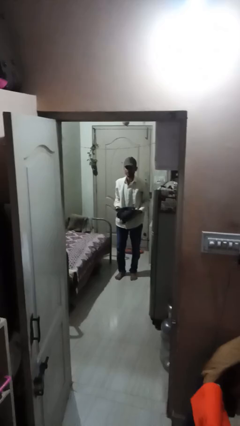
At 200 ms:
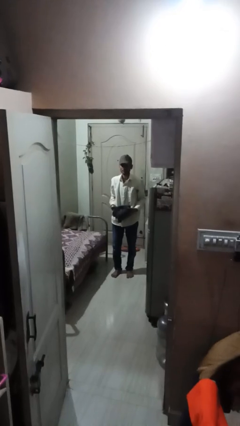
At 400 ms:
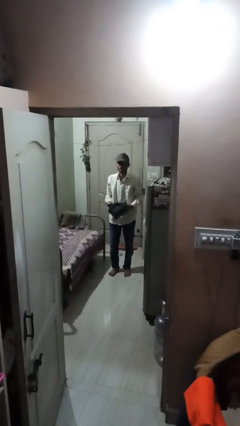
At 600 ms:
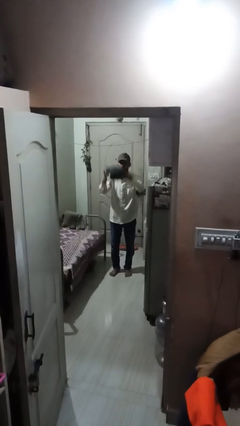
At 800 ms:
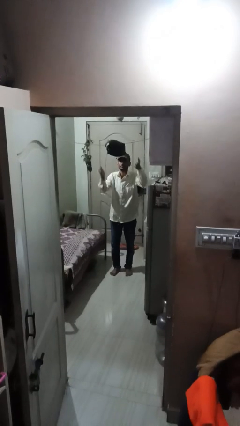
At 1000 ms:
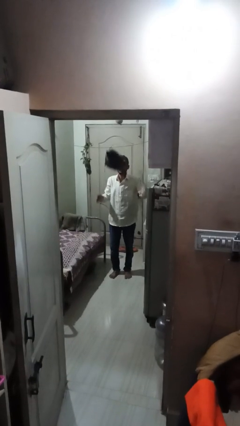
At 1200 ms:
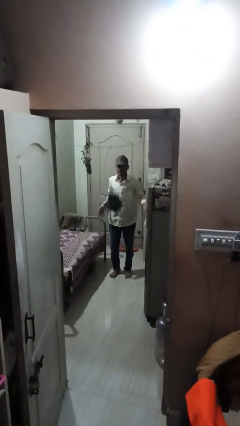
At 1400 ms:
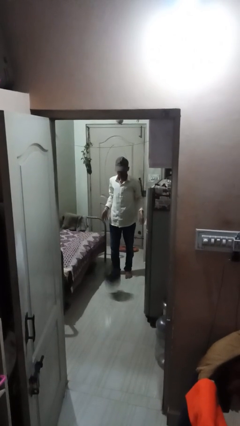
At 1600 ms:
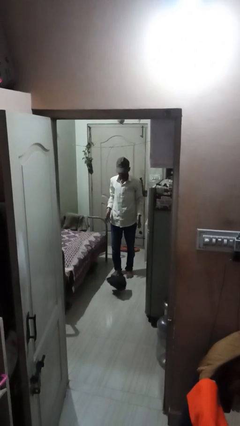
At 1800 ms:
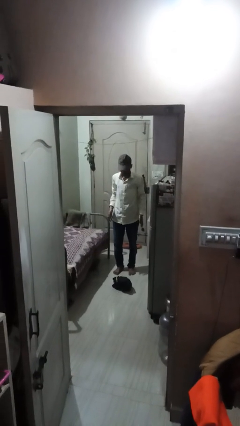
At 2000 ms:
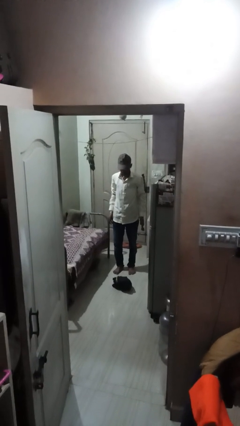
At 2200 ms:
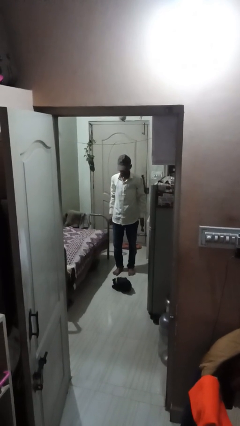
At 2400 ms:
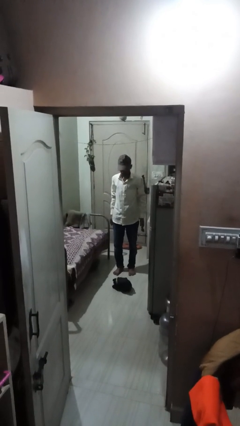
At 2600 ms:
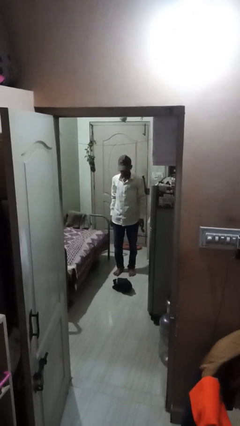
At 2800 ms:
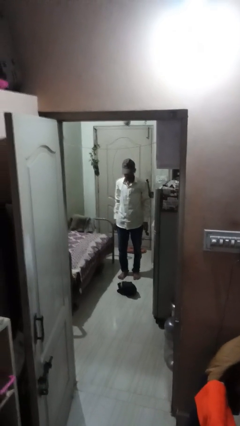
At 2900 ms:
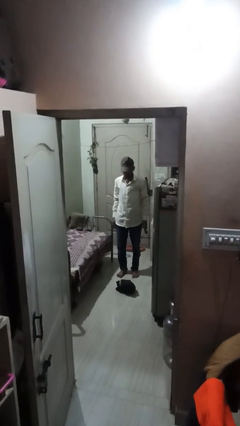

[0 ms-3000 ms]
person throws object into air

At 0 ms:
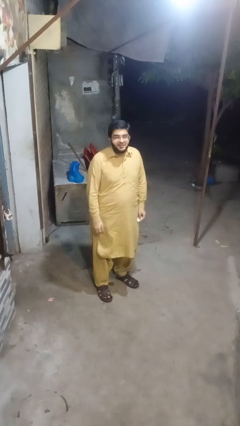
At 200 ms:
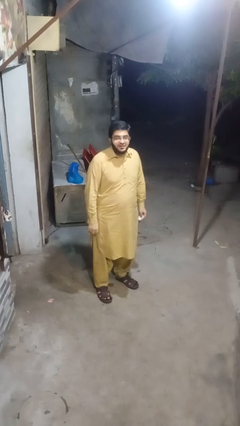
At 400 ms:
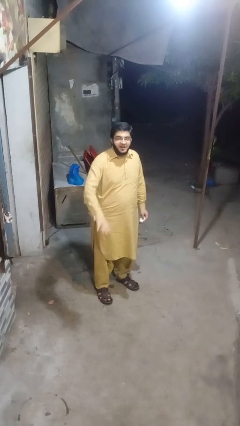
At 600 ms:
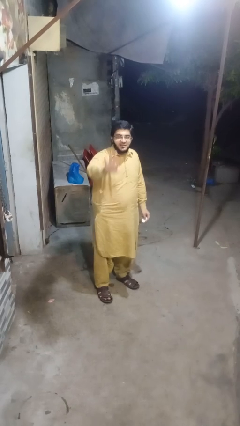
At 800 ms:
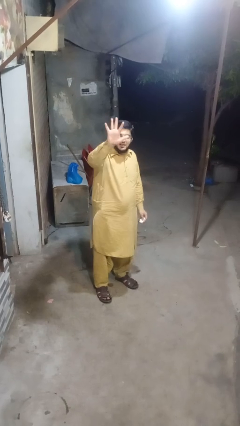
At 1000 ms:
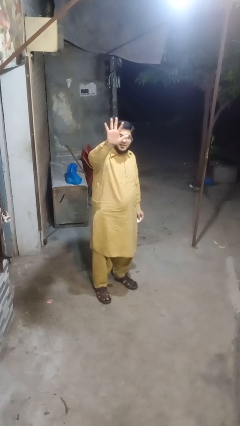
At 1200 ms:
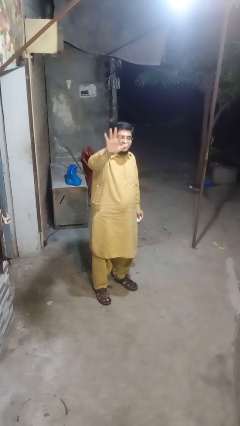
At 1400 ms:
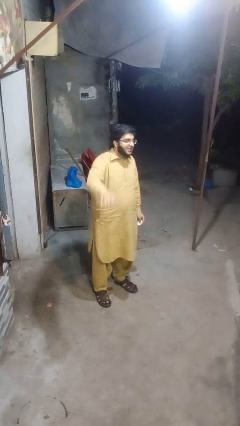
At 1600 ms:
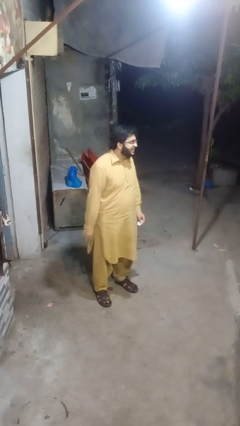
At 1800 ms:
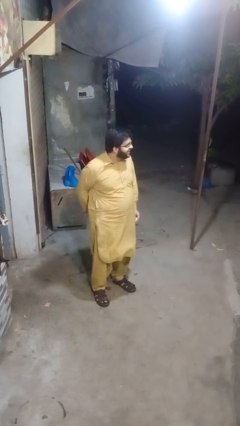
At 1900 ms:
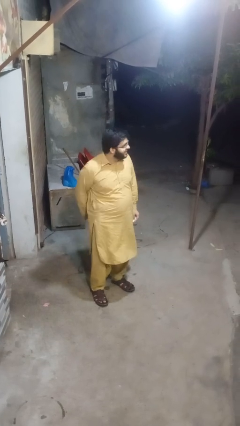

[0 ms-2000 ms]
person gestures number five

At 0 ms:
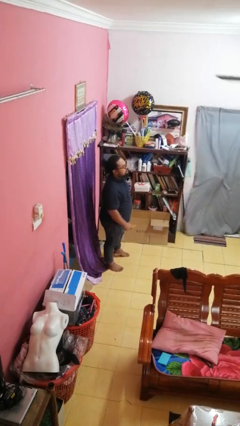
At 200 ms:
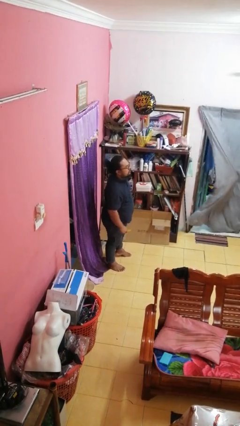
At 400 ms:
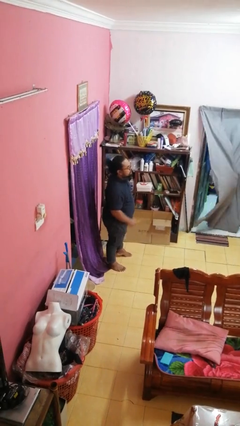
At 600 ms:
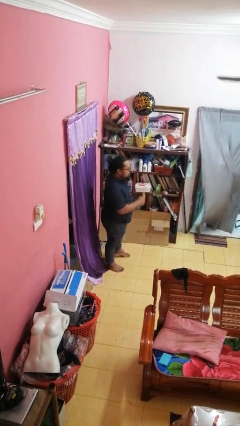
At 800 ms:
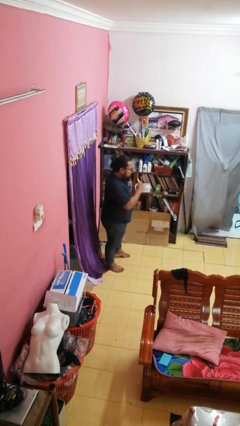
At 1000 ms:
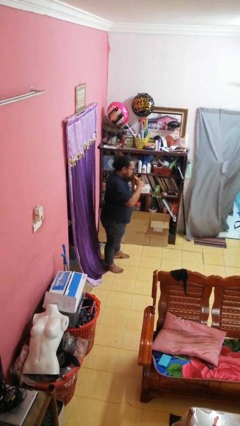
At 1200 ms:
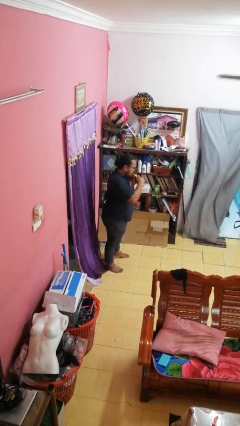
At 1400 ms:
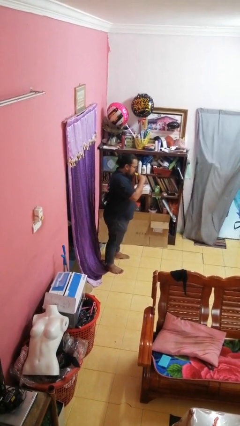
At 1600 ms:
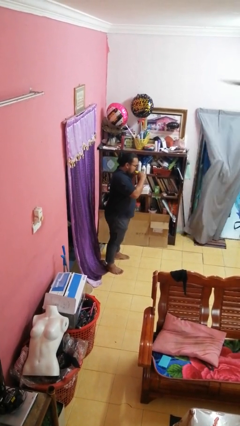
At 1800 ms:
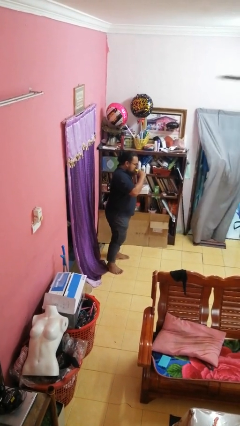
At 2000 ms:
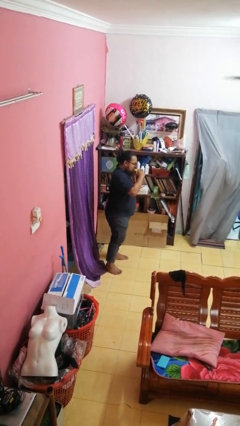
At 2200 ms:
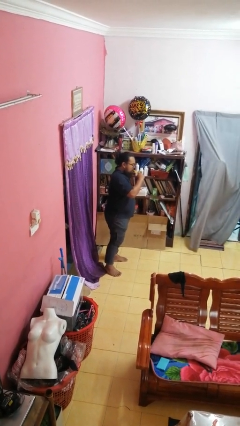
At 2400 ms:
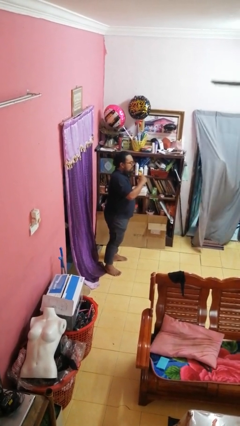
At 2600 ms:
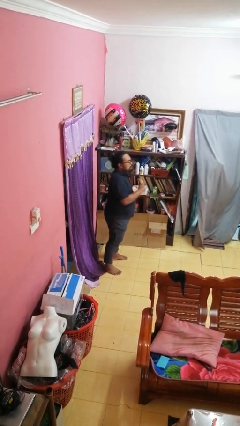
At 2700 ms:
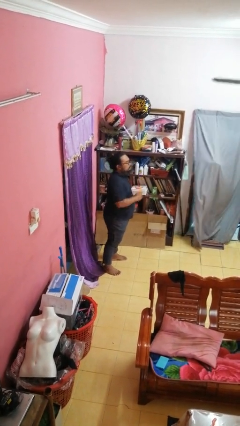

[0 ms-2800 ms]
person eats banana

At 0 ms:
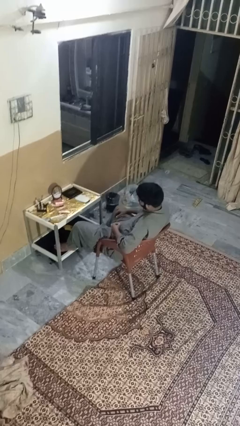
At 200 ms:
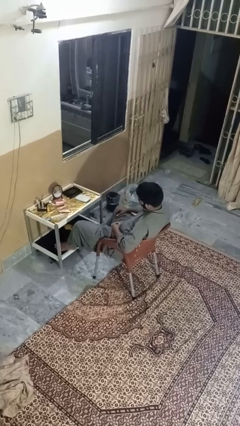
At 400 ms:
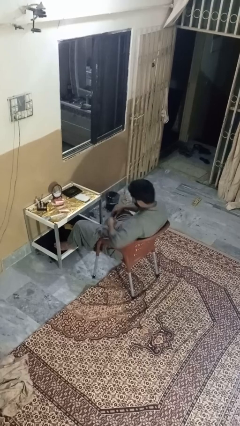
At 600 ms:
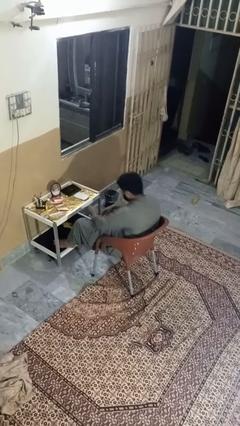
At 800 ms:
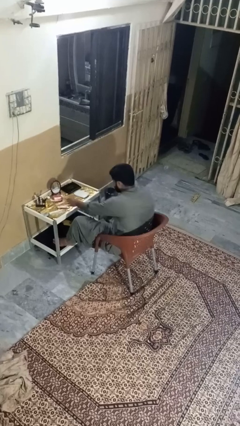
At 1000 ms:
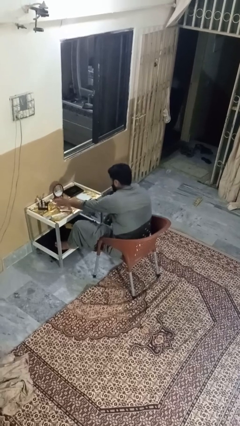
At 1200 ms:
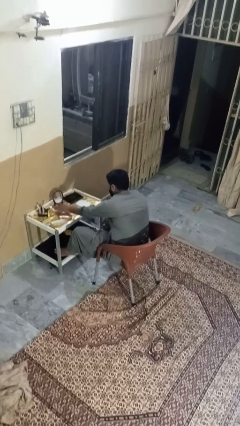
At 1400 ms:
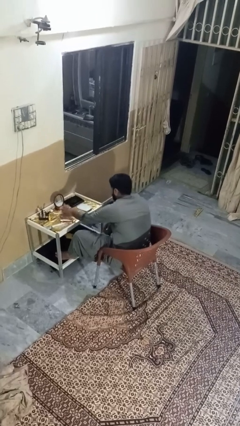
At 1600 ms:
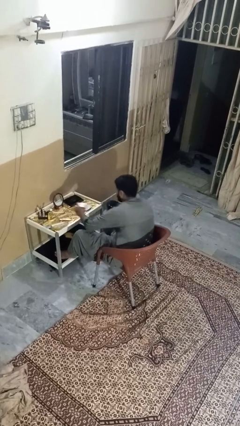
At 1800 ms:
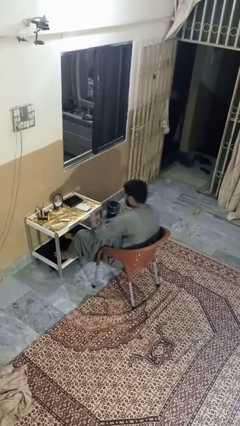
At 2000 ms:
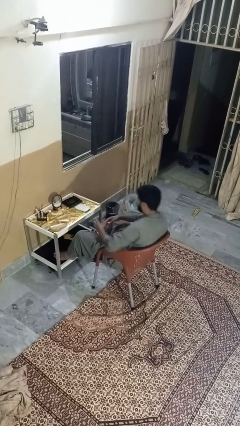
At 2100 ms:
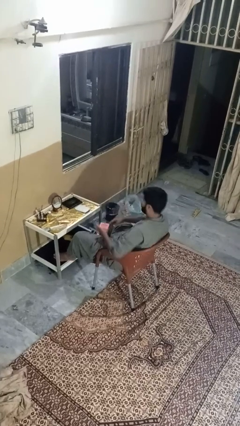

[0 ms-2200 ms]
person picks up object from table

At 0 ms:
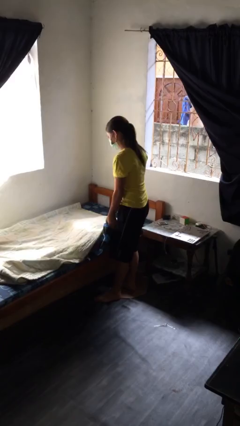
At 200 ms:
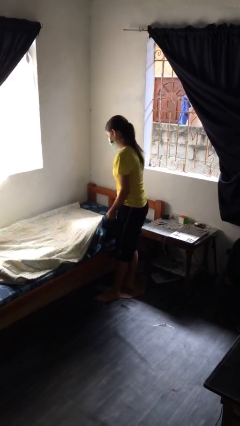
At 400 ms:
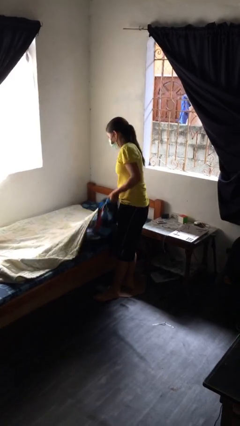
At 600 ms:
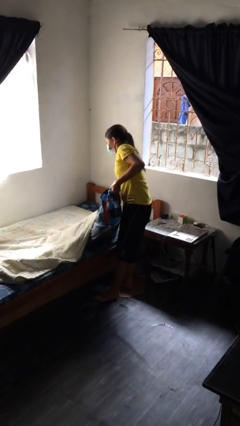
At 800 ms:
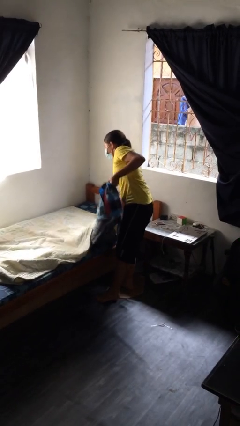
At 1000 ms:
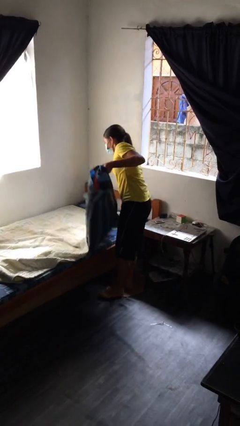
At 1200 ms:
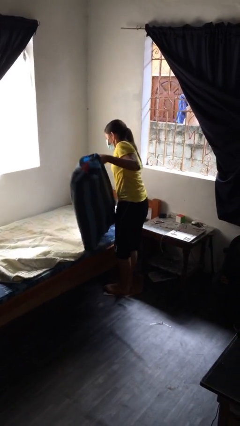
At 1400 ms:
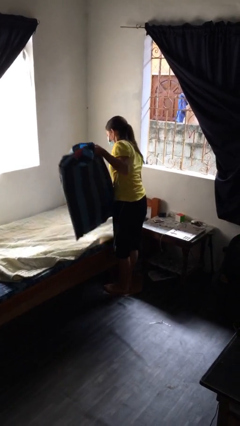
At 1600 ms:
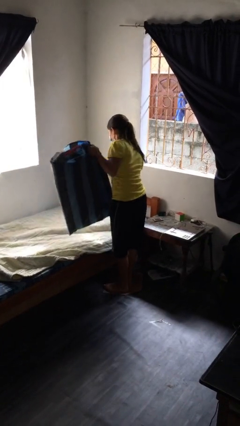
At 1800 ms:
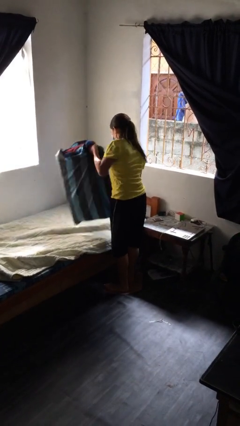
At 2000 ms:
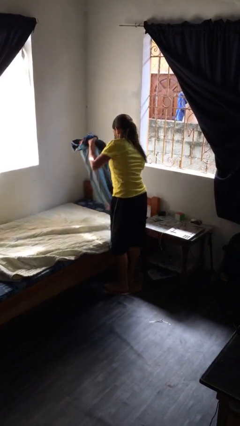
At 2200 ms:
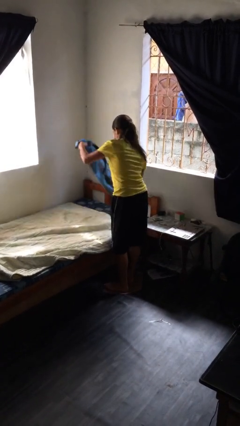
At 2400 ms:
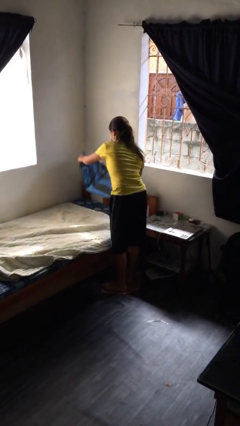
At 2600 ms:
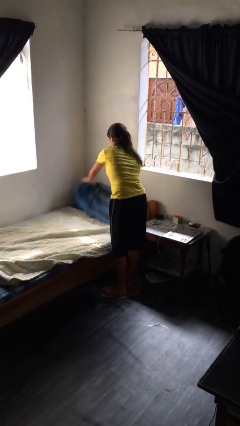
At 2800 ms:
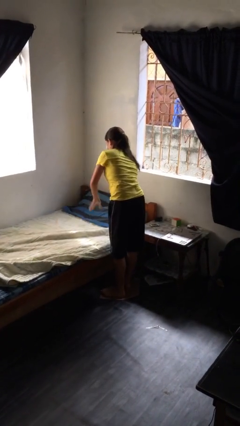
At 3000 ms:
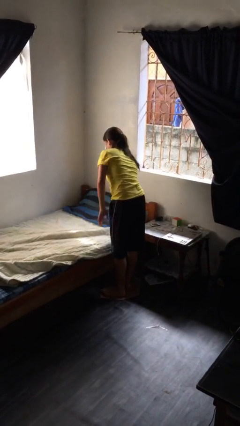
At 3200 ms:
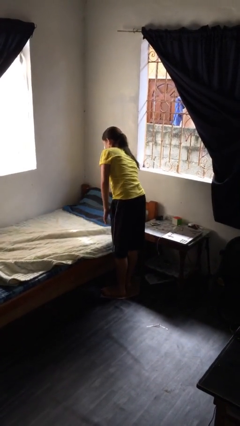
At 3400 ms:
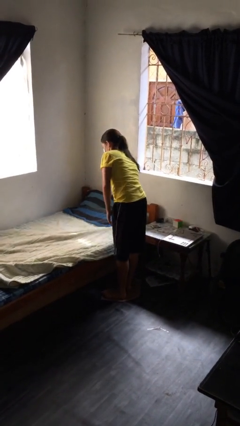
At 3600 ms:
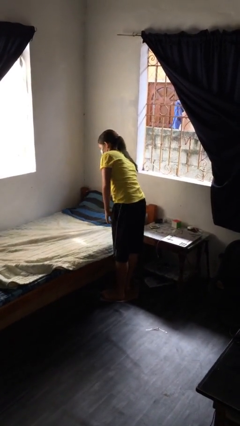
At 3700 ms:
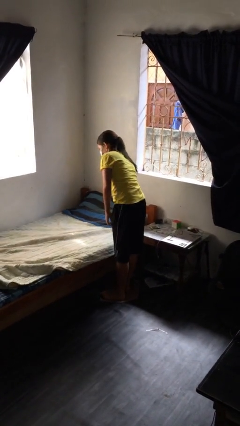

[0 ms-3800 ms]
person makes bed

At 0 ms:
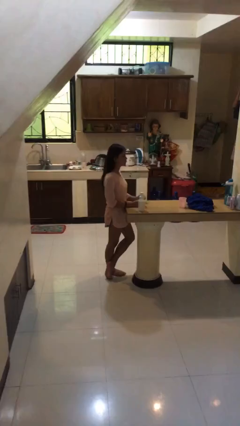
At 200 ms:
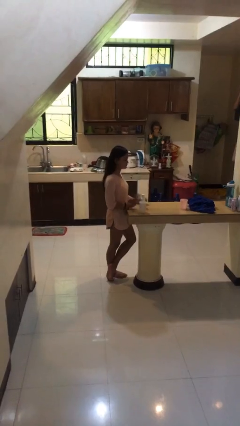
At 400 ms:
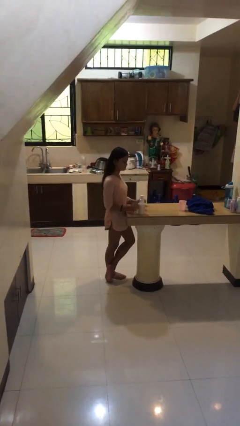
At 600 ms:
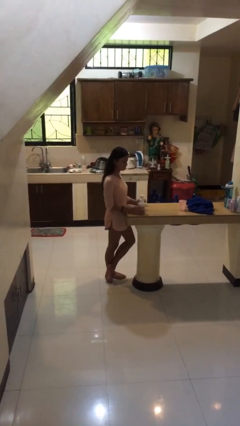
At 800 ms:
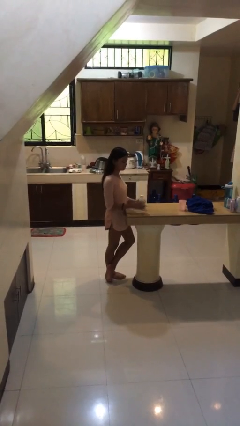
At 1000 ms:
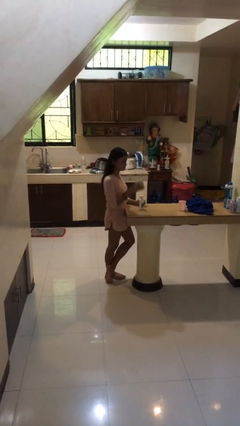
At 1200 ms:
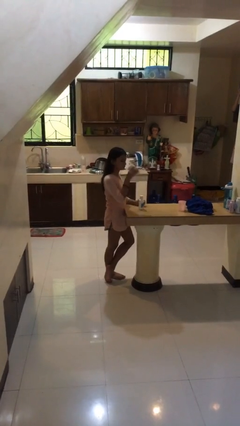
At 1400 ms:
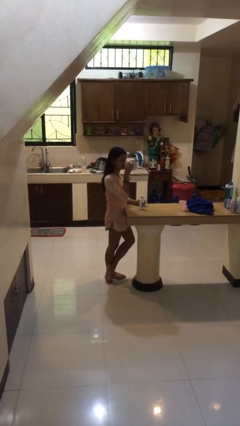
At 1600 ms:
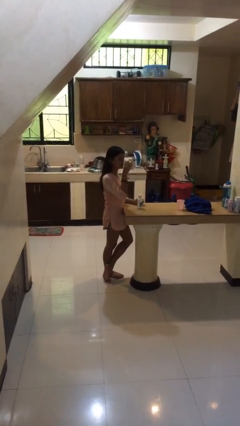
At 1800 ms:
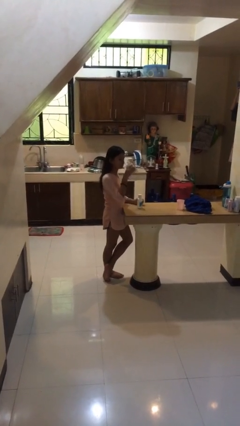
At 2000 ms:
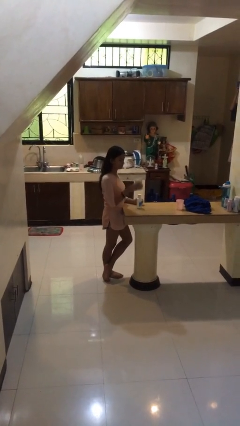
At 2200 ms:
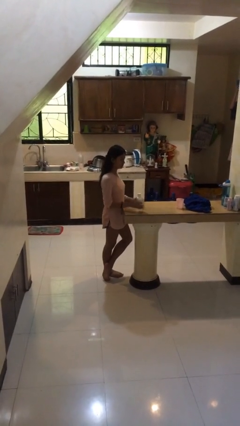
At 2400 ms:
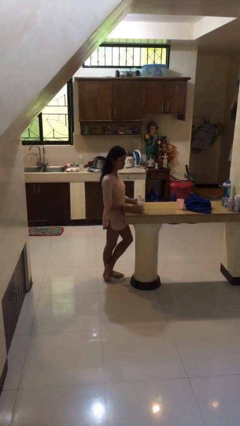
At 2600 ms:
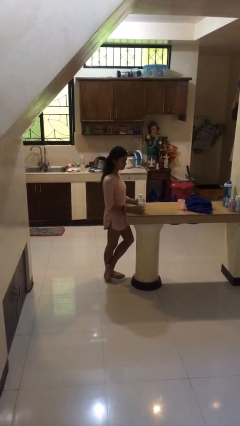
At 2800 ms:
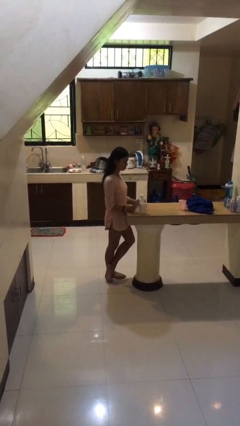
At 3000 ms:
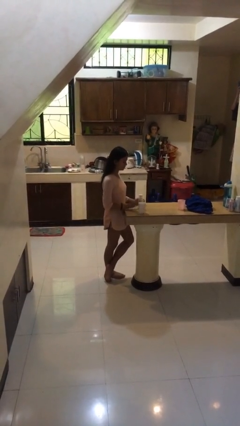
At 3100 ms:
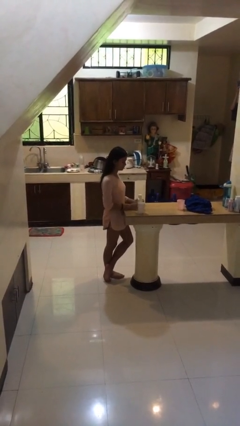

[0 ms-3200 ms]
person drinks from cup
